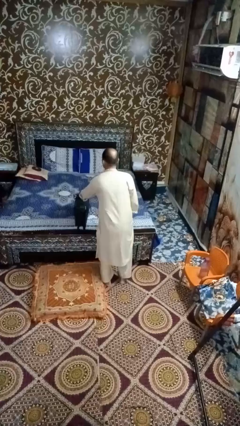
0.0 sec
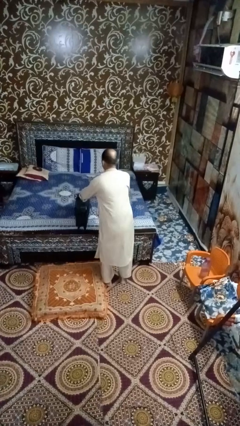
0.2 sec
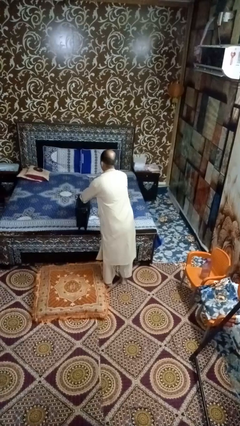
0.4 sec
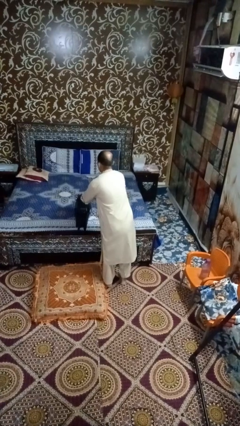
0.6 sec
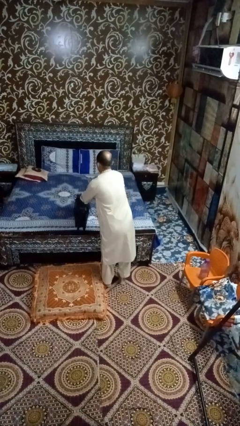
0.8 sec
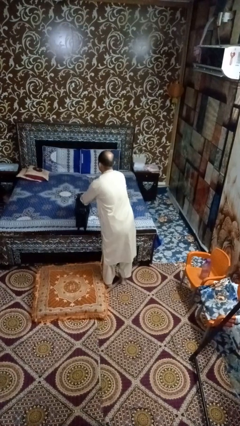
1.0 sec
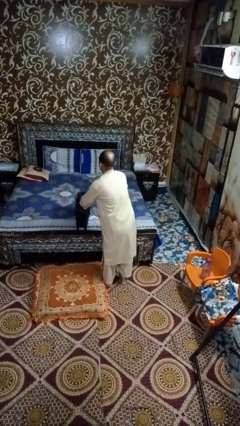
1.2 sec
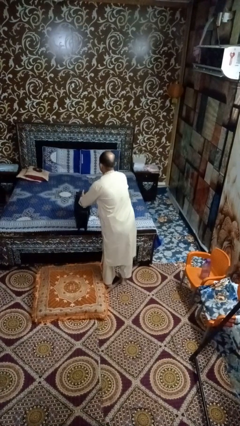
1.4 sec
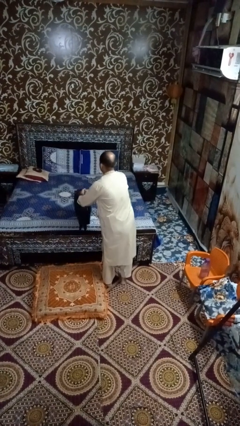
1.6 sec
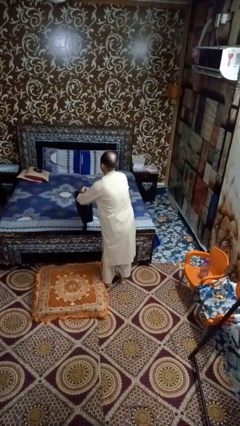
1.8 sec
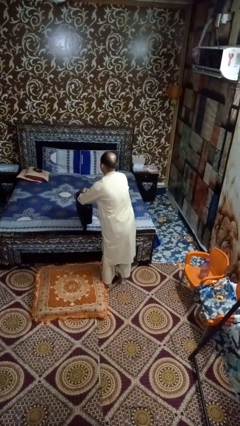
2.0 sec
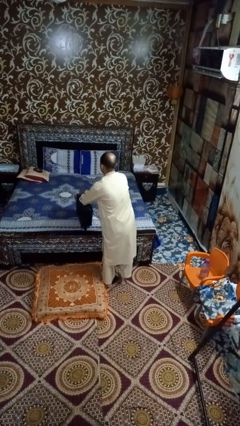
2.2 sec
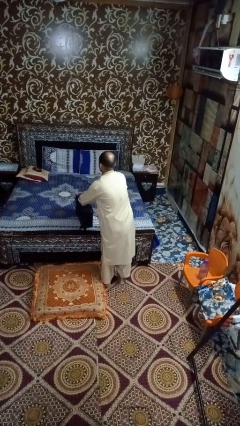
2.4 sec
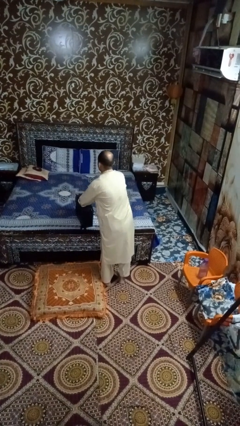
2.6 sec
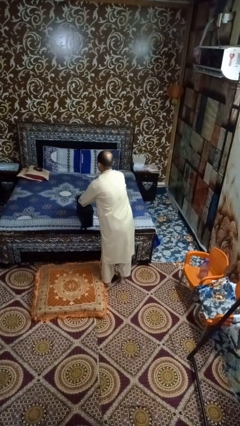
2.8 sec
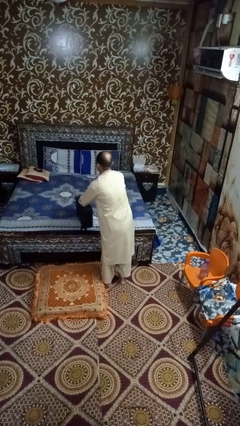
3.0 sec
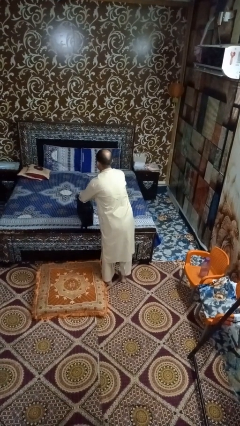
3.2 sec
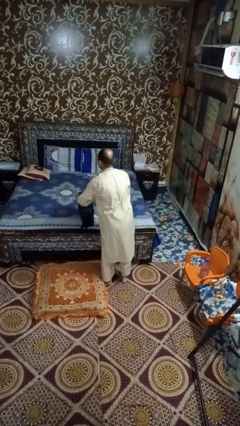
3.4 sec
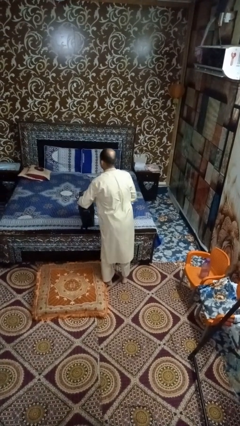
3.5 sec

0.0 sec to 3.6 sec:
person picks up object from bed

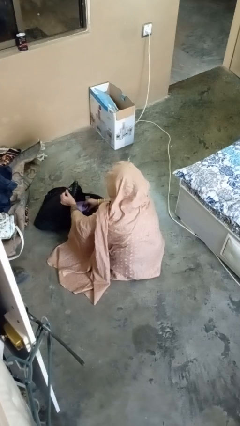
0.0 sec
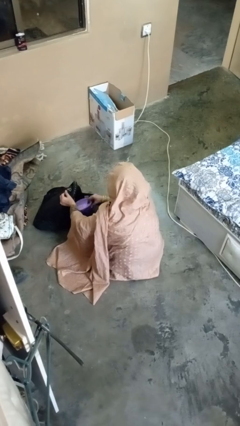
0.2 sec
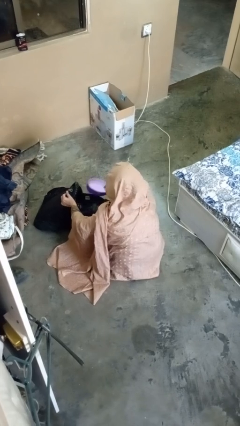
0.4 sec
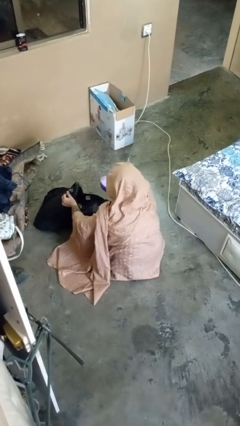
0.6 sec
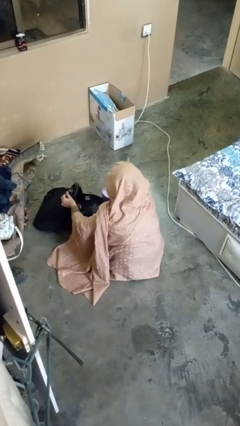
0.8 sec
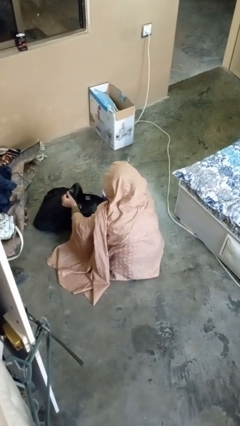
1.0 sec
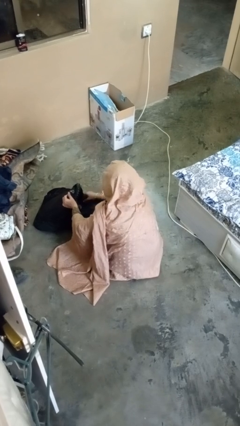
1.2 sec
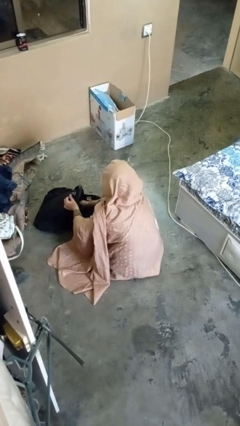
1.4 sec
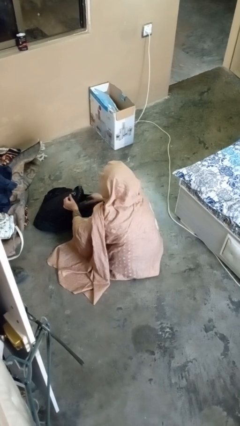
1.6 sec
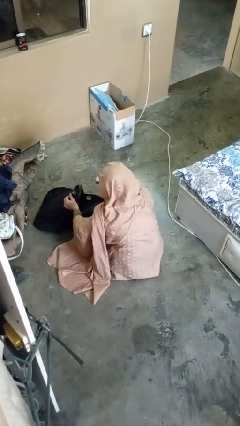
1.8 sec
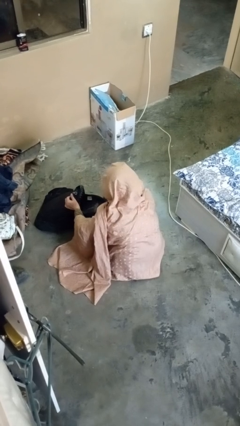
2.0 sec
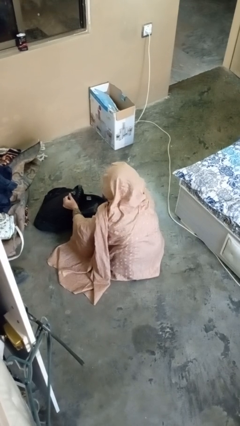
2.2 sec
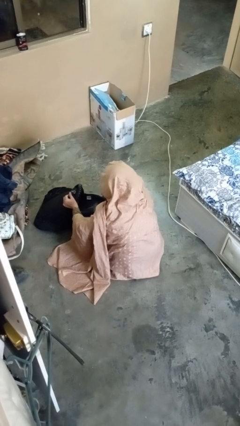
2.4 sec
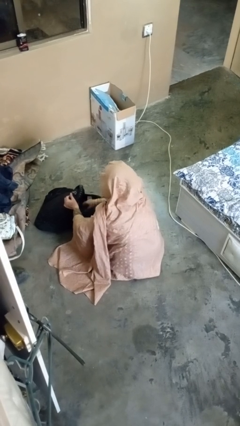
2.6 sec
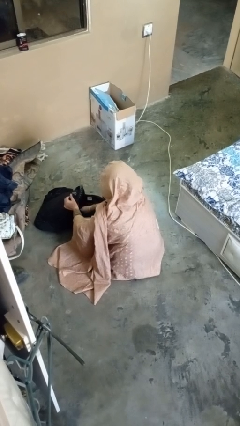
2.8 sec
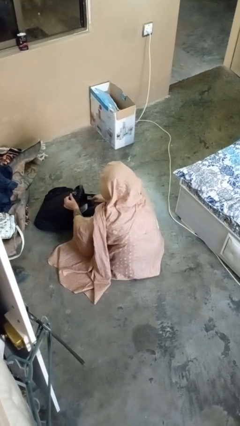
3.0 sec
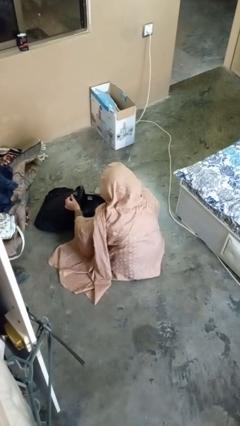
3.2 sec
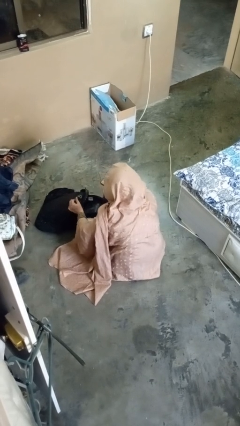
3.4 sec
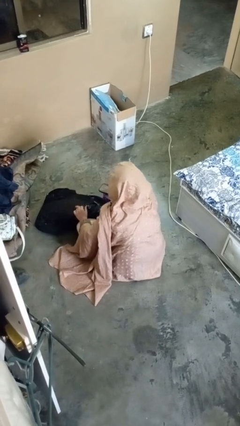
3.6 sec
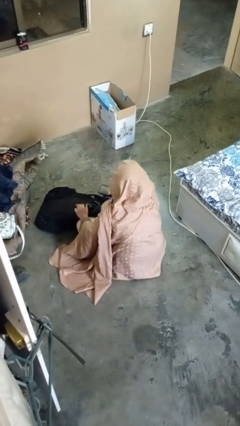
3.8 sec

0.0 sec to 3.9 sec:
person takes object from backpack

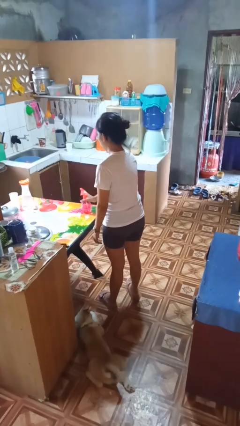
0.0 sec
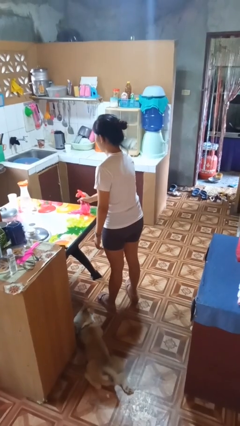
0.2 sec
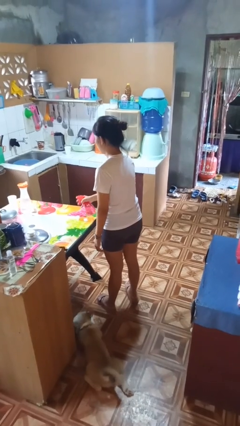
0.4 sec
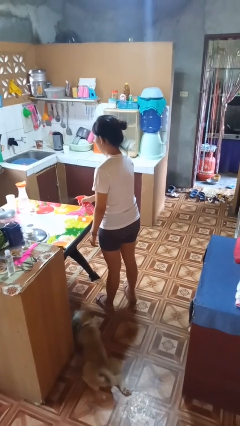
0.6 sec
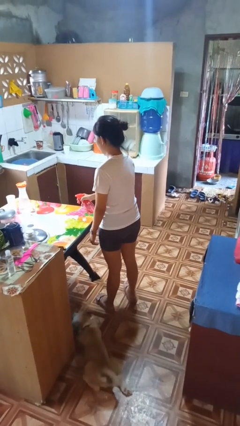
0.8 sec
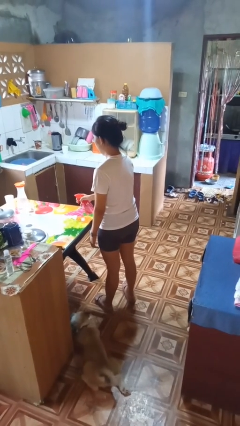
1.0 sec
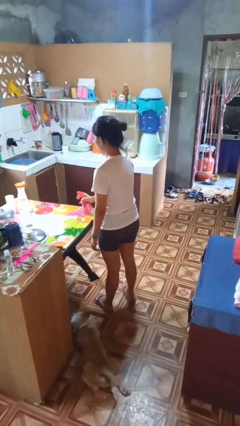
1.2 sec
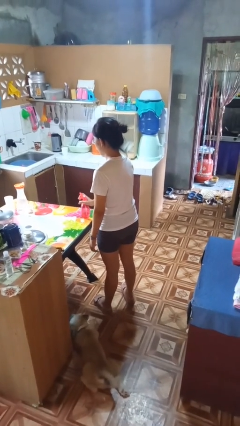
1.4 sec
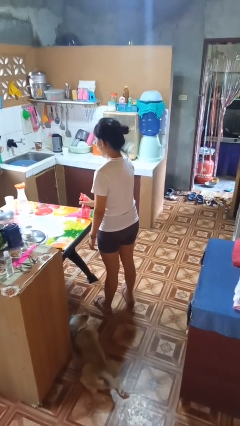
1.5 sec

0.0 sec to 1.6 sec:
person sprays from bottle

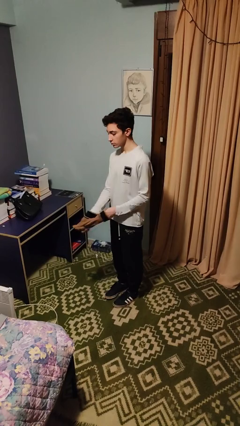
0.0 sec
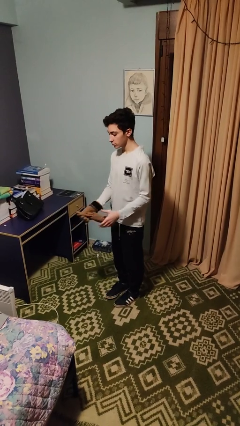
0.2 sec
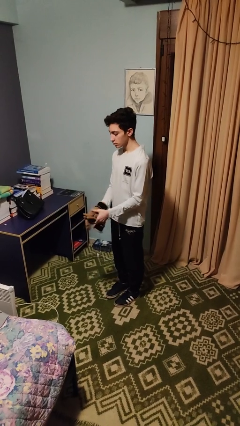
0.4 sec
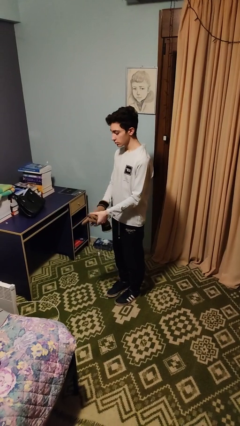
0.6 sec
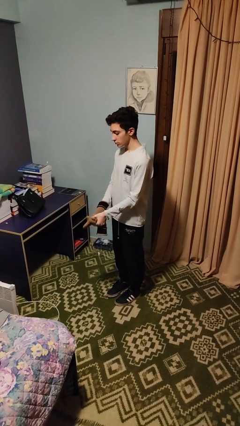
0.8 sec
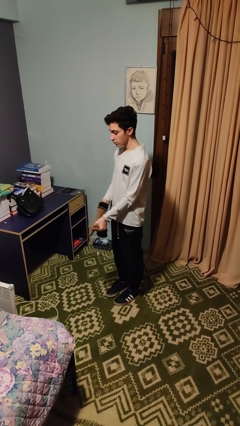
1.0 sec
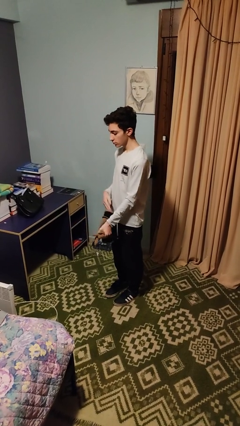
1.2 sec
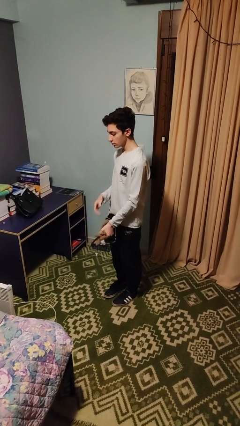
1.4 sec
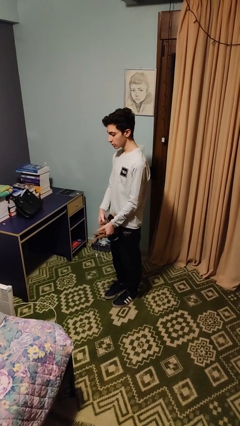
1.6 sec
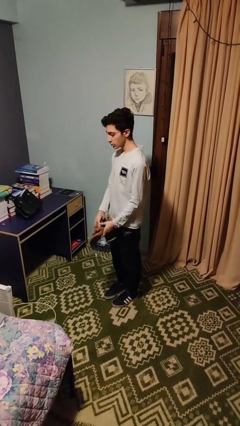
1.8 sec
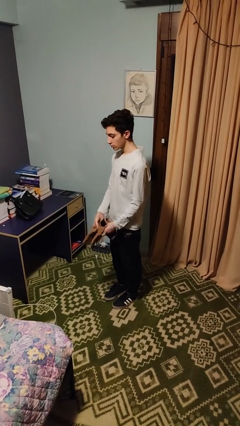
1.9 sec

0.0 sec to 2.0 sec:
person takes off gloves

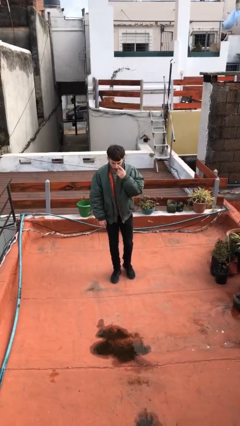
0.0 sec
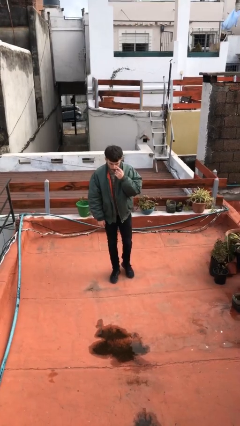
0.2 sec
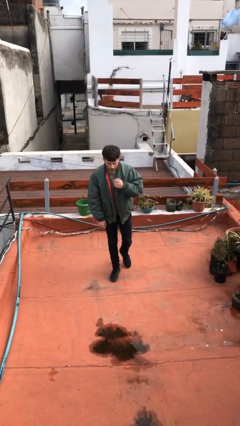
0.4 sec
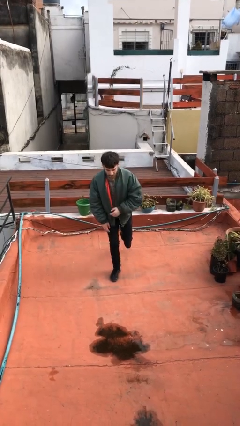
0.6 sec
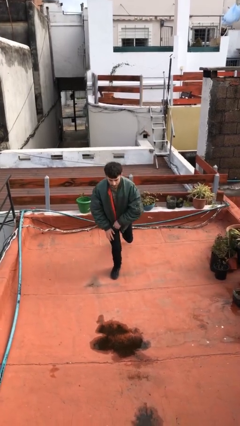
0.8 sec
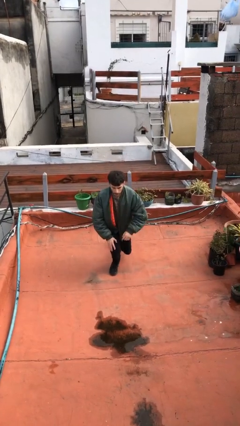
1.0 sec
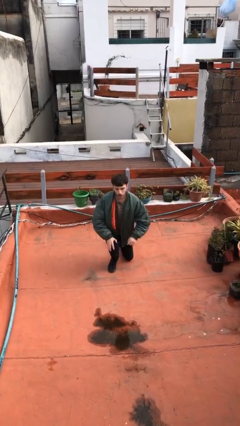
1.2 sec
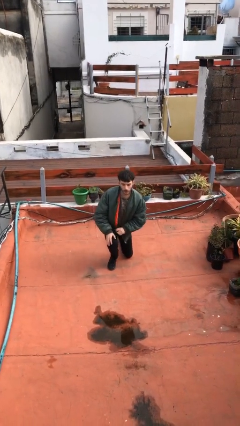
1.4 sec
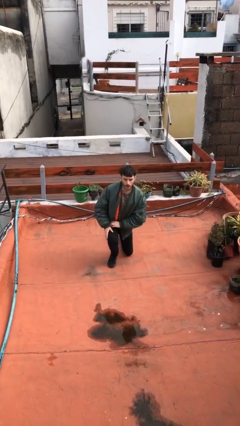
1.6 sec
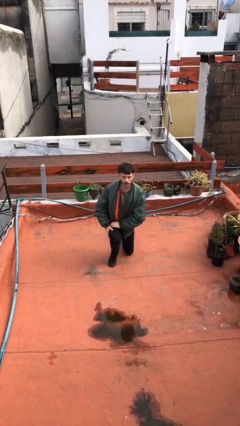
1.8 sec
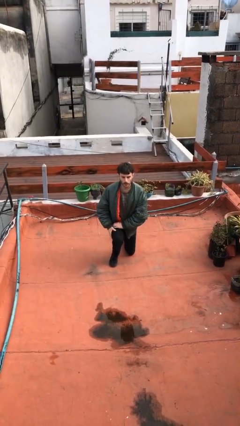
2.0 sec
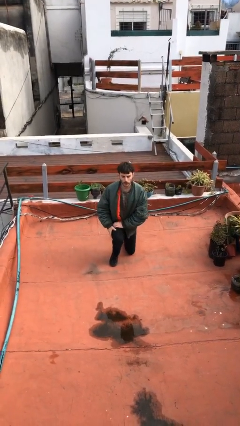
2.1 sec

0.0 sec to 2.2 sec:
person kneels

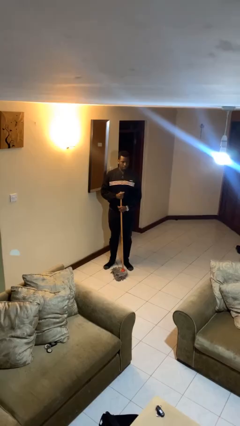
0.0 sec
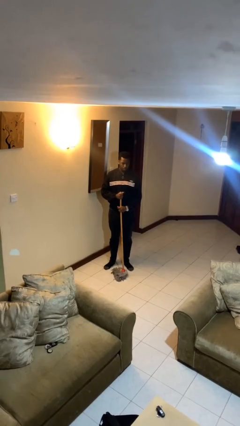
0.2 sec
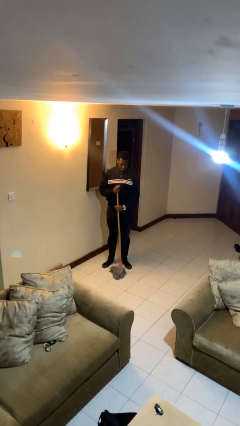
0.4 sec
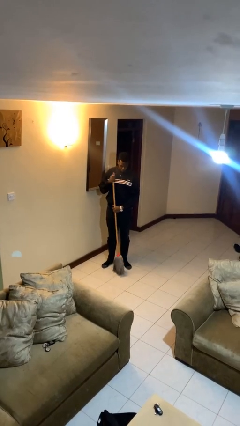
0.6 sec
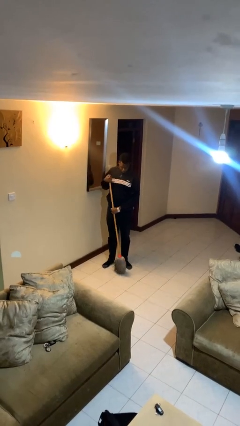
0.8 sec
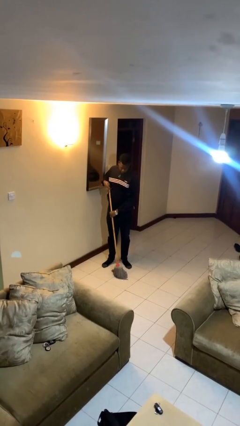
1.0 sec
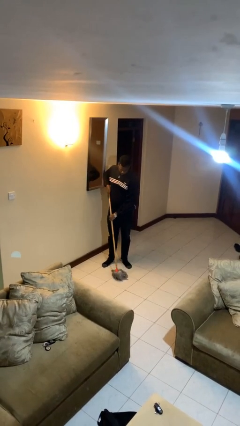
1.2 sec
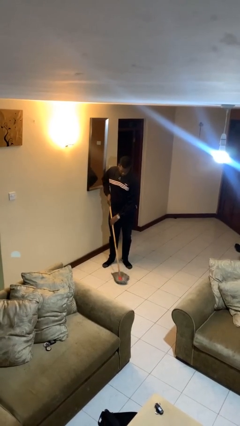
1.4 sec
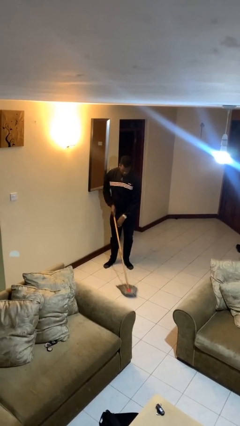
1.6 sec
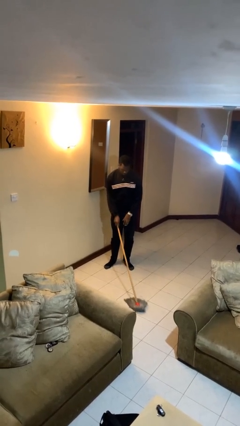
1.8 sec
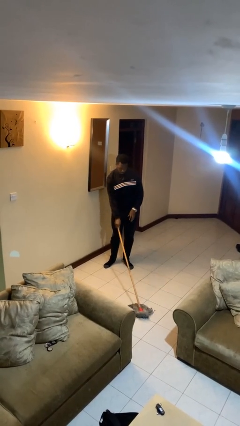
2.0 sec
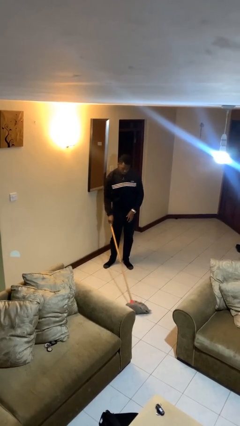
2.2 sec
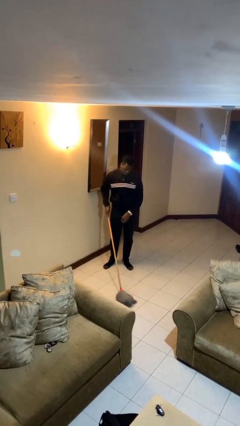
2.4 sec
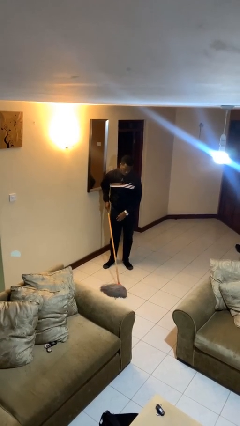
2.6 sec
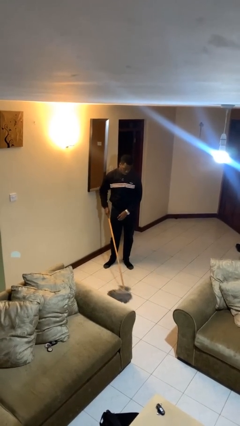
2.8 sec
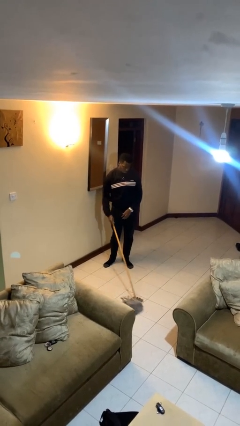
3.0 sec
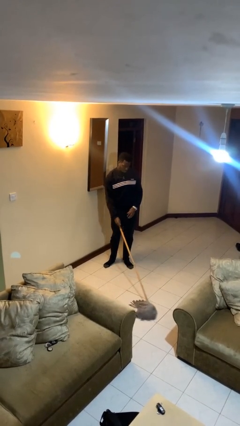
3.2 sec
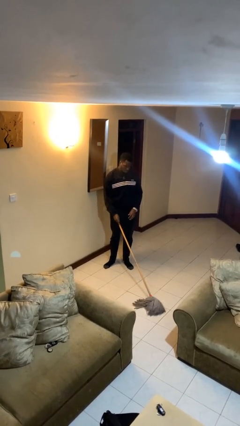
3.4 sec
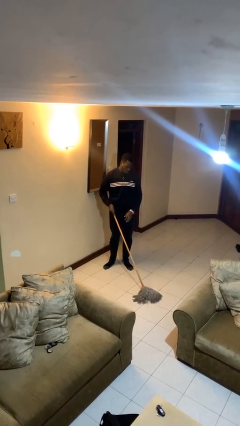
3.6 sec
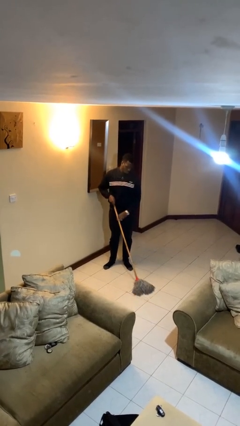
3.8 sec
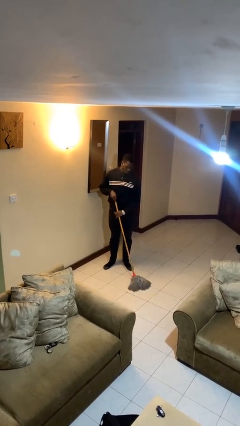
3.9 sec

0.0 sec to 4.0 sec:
person mops
